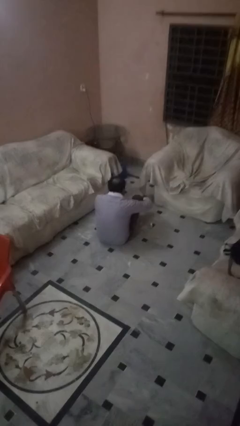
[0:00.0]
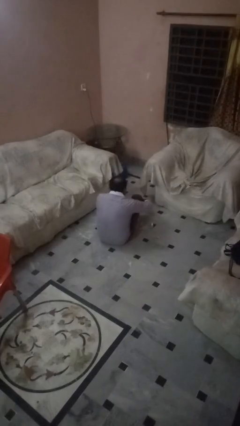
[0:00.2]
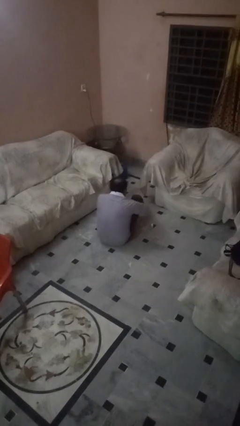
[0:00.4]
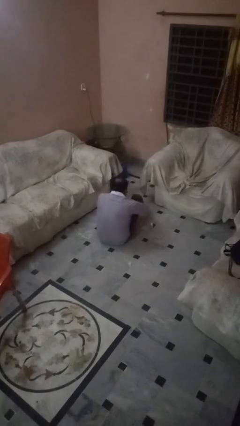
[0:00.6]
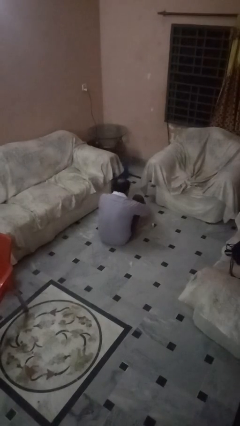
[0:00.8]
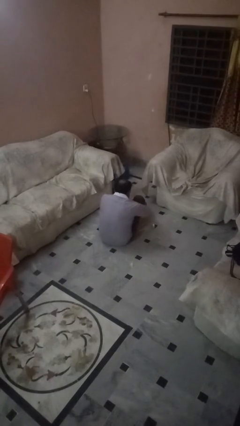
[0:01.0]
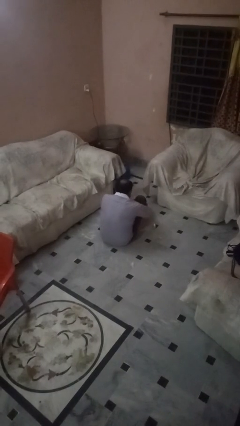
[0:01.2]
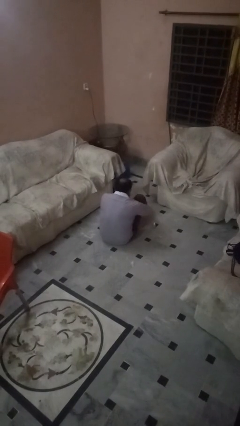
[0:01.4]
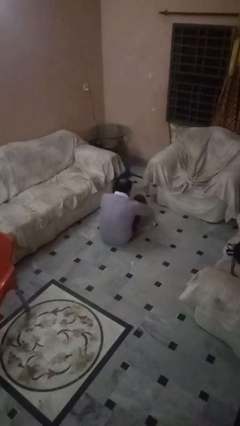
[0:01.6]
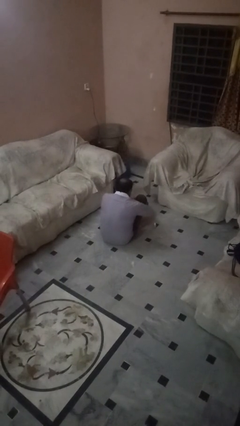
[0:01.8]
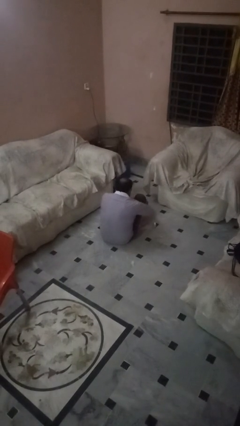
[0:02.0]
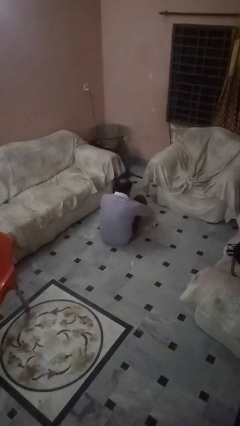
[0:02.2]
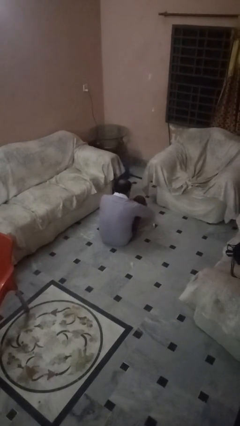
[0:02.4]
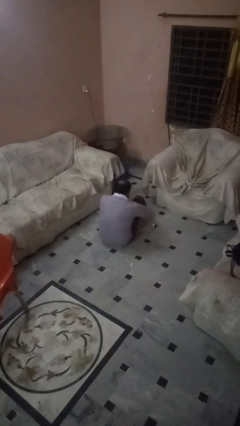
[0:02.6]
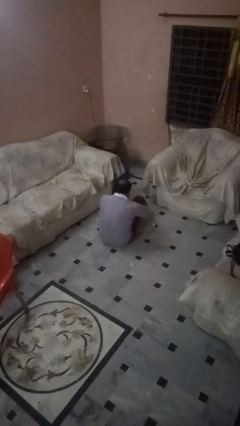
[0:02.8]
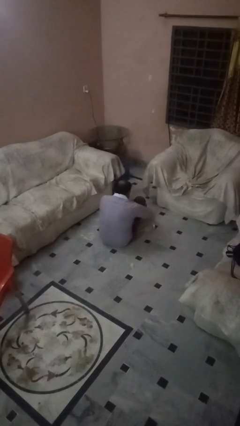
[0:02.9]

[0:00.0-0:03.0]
person rubs foot

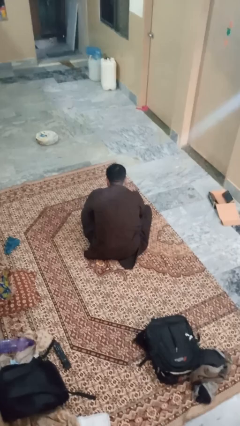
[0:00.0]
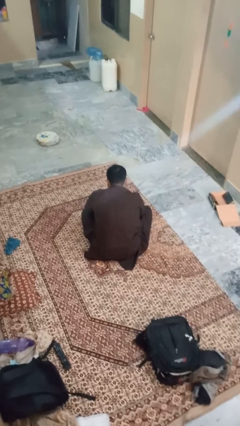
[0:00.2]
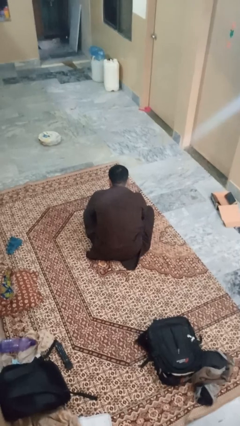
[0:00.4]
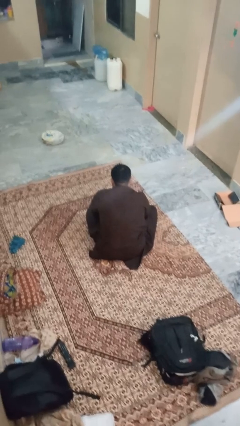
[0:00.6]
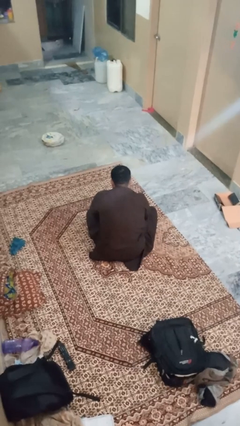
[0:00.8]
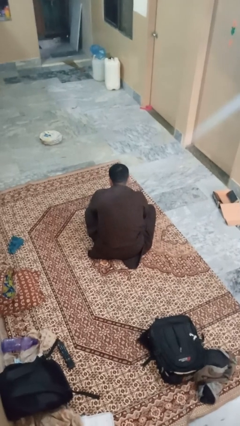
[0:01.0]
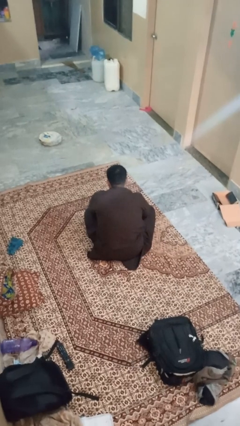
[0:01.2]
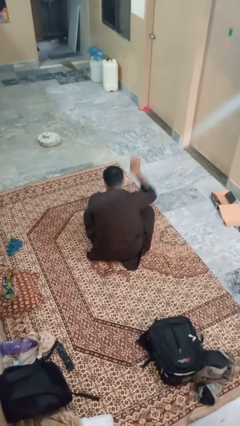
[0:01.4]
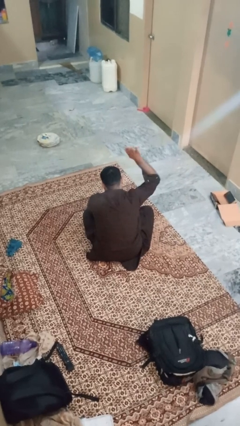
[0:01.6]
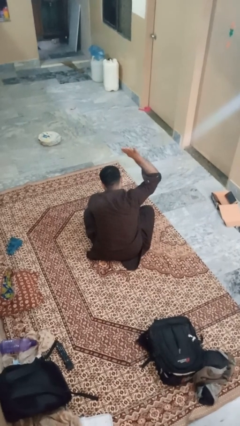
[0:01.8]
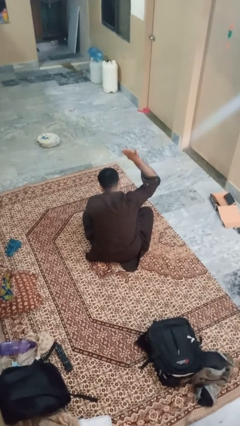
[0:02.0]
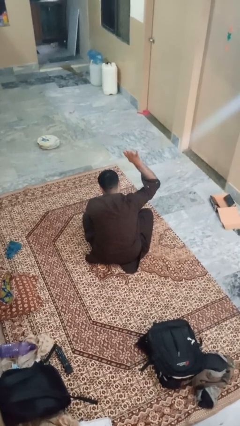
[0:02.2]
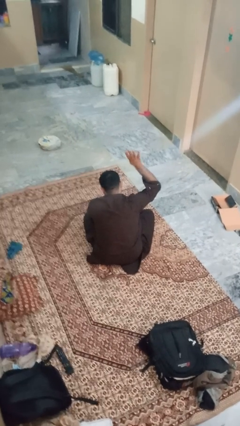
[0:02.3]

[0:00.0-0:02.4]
person gestures number four

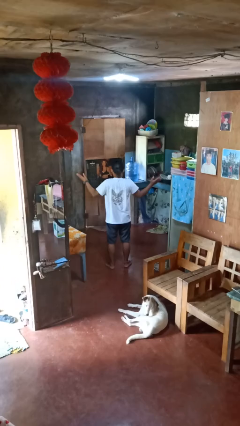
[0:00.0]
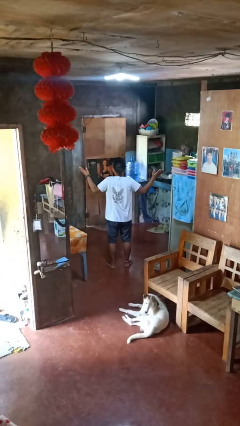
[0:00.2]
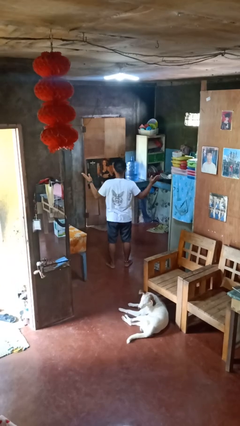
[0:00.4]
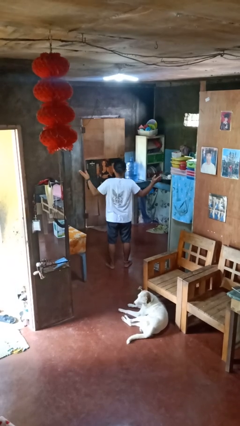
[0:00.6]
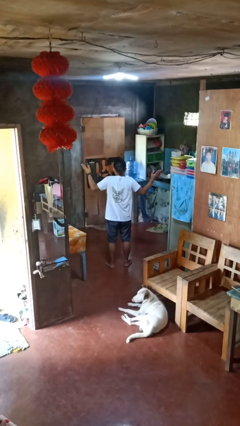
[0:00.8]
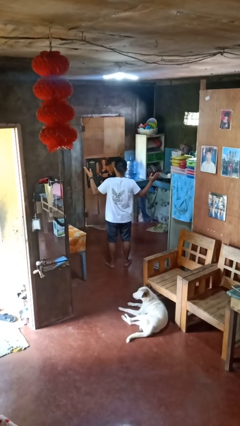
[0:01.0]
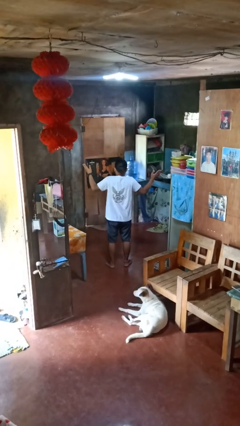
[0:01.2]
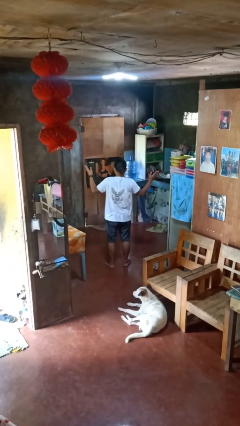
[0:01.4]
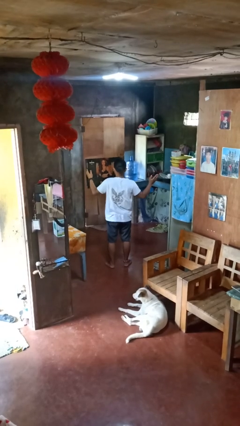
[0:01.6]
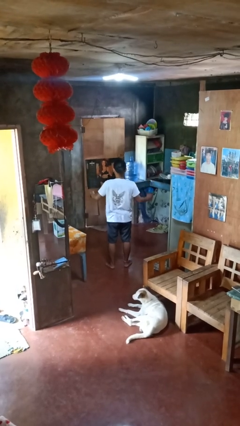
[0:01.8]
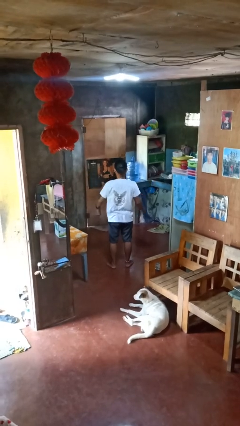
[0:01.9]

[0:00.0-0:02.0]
person shrugs

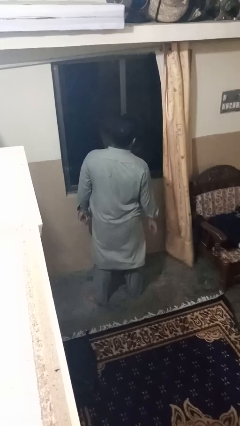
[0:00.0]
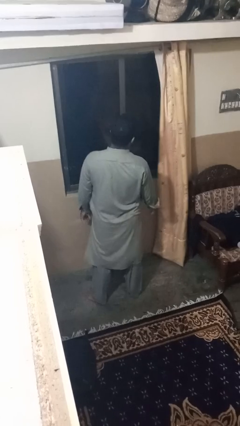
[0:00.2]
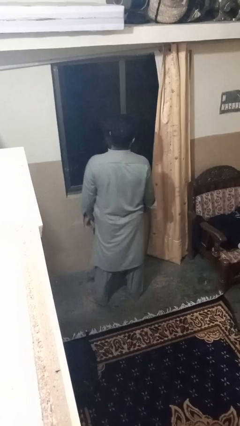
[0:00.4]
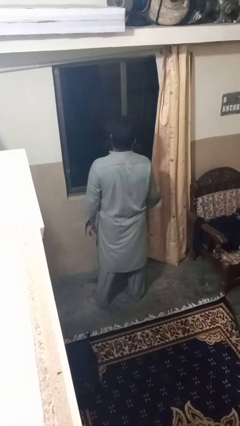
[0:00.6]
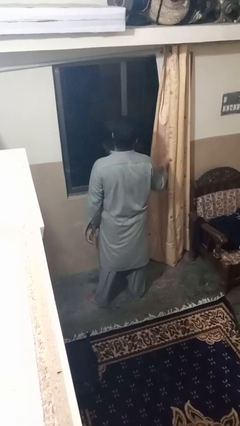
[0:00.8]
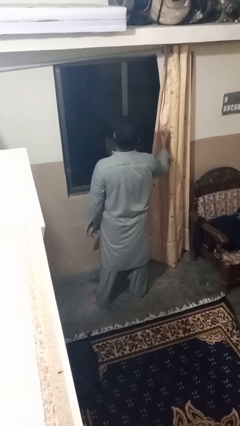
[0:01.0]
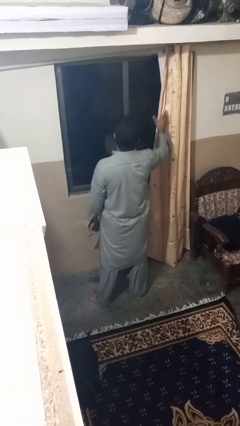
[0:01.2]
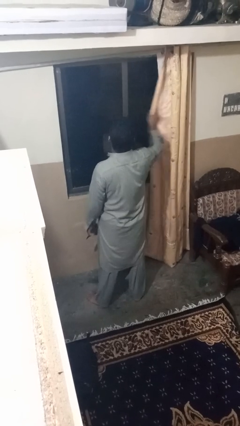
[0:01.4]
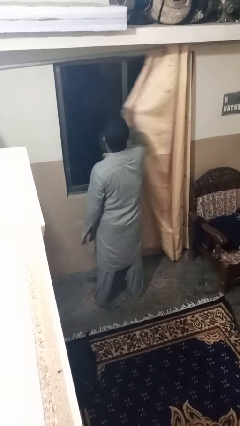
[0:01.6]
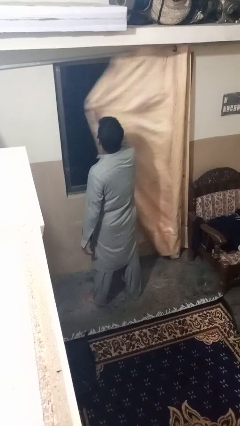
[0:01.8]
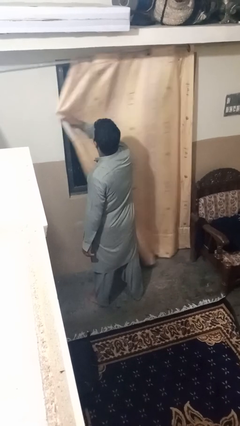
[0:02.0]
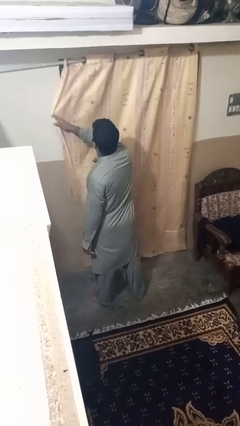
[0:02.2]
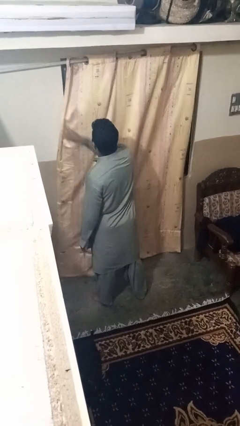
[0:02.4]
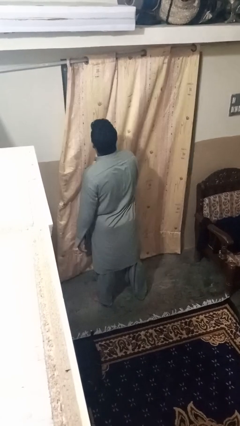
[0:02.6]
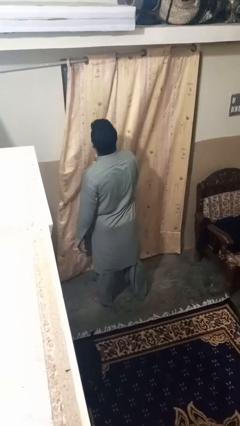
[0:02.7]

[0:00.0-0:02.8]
person closes curtains

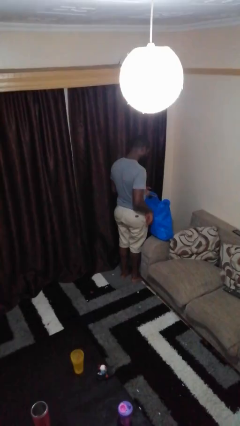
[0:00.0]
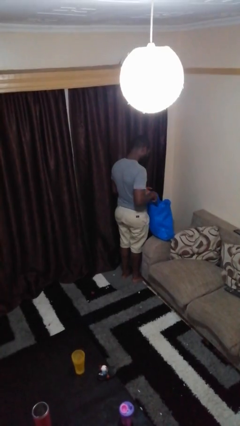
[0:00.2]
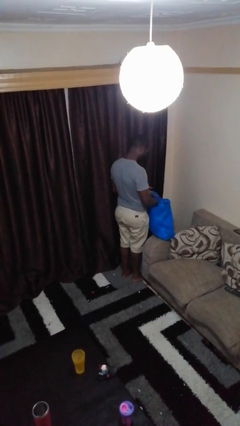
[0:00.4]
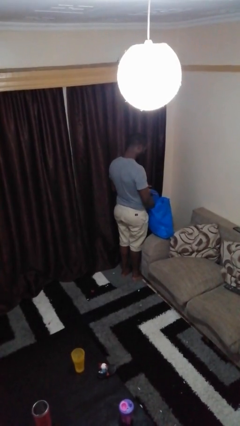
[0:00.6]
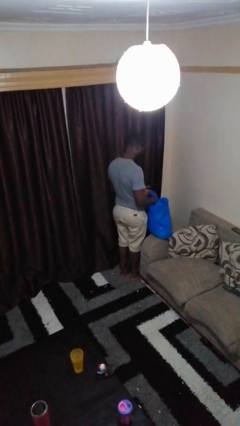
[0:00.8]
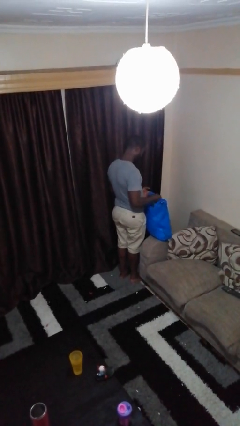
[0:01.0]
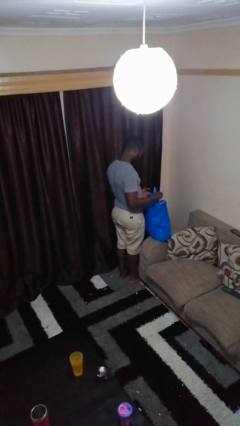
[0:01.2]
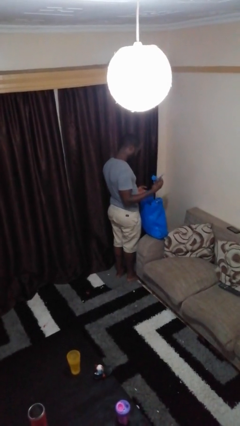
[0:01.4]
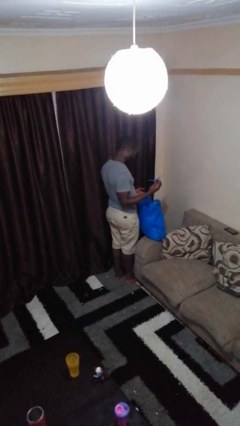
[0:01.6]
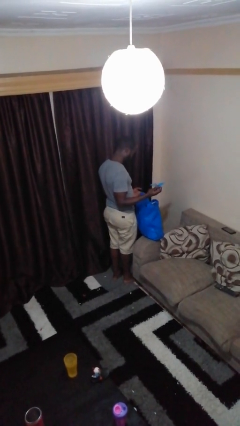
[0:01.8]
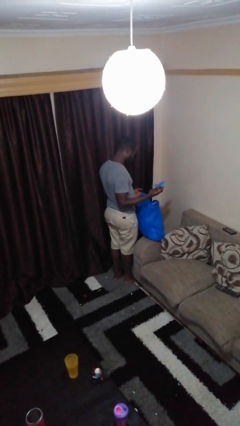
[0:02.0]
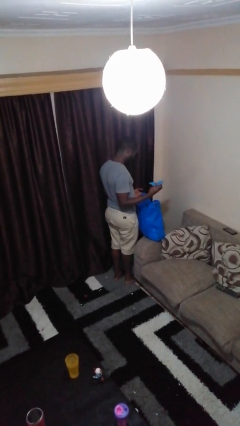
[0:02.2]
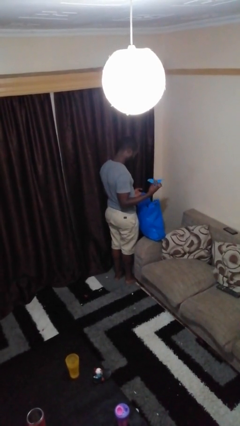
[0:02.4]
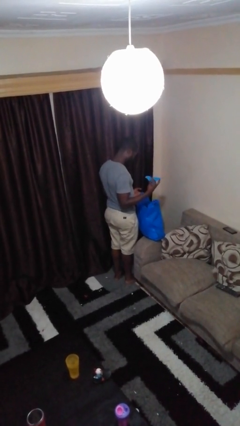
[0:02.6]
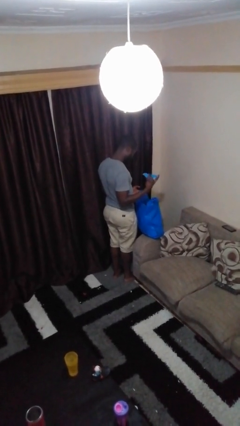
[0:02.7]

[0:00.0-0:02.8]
person takes object from bag

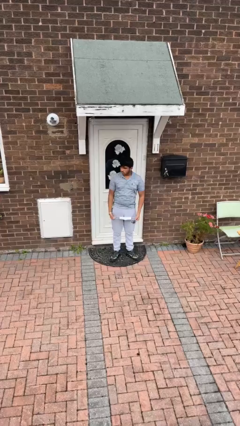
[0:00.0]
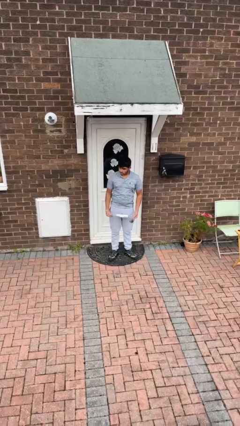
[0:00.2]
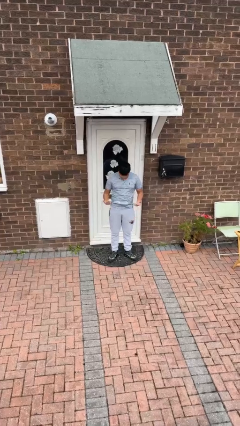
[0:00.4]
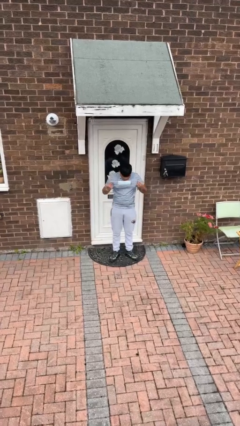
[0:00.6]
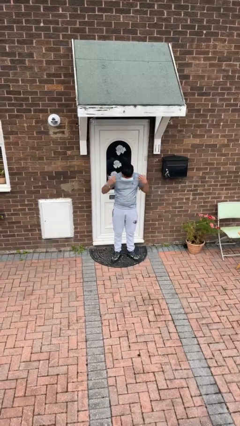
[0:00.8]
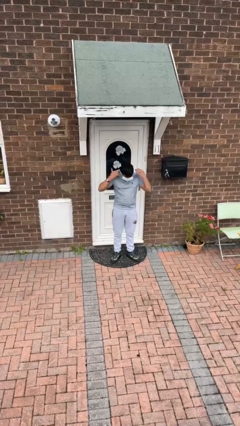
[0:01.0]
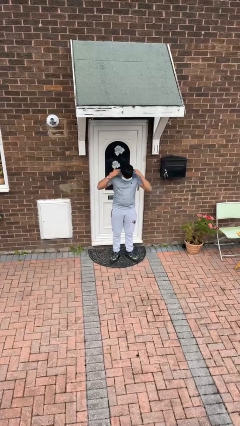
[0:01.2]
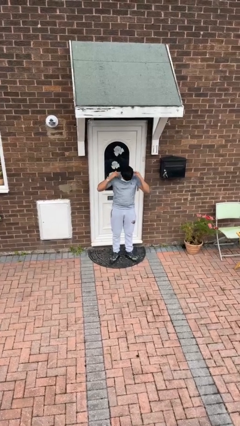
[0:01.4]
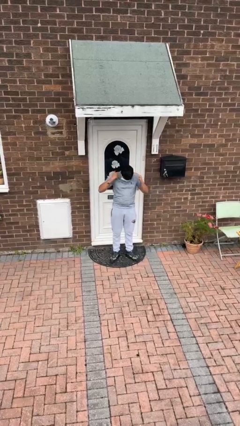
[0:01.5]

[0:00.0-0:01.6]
person puts on facemask

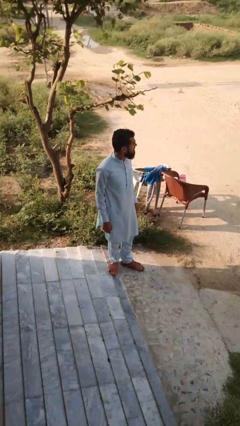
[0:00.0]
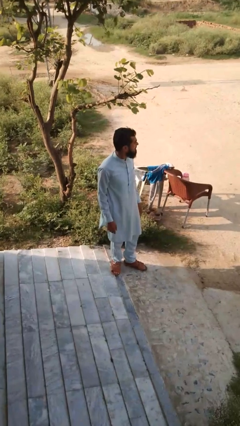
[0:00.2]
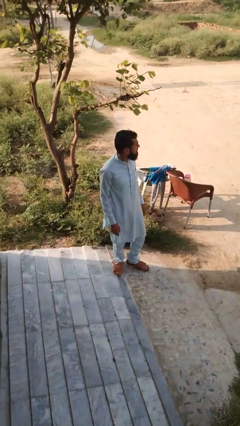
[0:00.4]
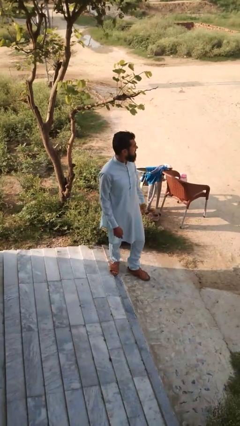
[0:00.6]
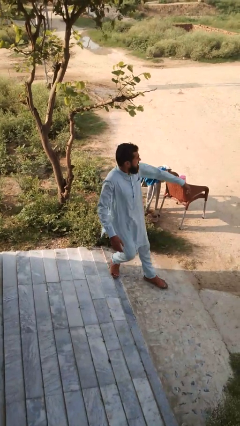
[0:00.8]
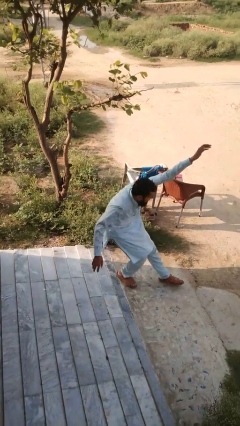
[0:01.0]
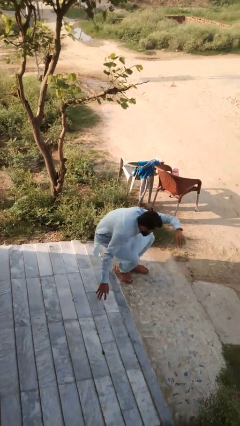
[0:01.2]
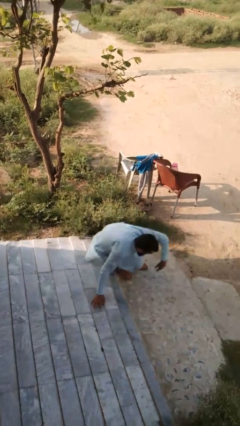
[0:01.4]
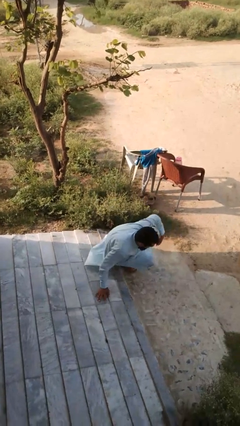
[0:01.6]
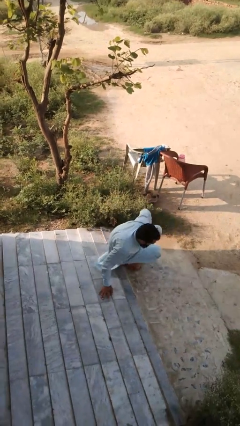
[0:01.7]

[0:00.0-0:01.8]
person trips on object on floor

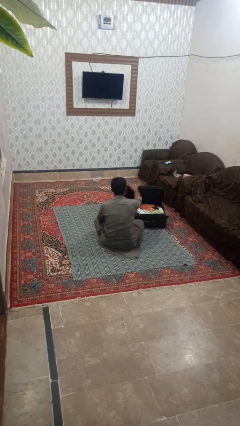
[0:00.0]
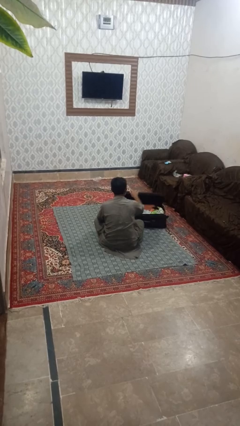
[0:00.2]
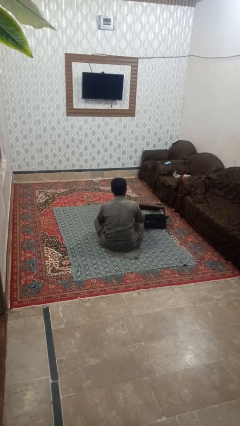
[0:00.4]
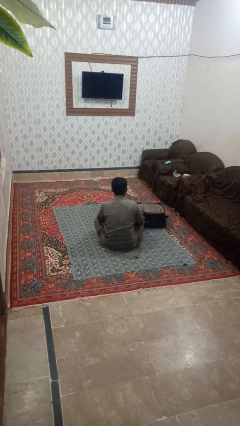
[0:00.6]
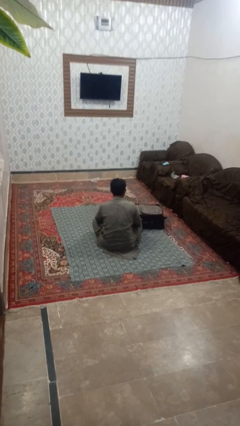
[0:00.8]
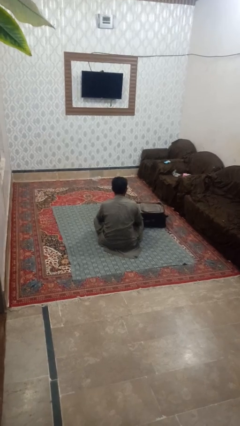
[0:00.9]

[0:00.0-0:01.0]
person closes suitcase
